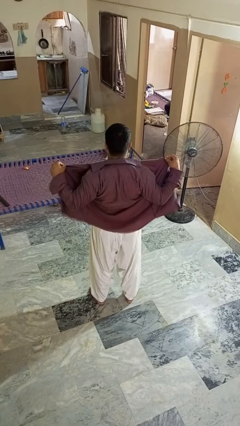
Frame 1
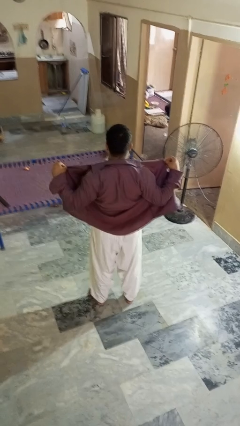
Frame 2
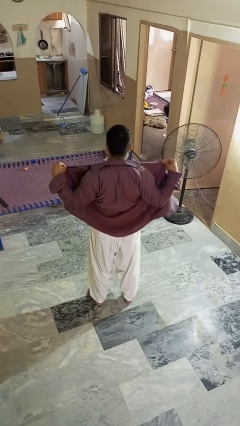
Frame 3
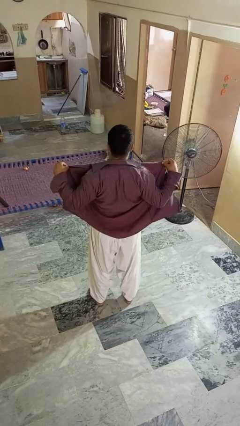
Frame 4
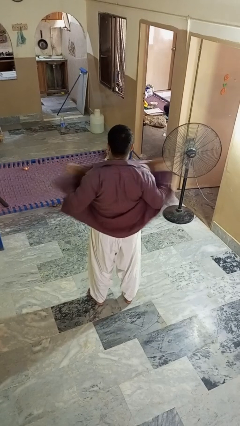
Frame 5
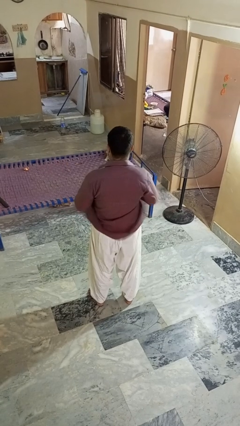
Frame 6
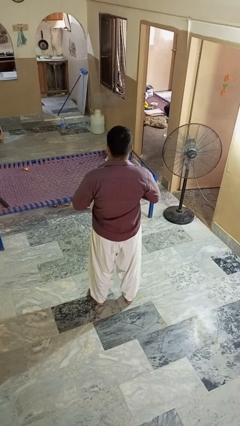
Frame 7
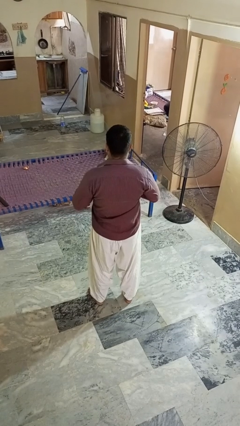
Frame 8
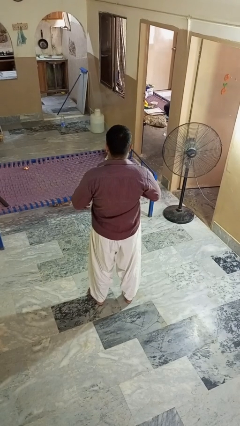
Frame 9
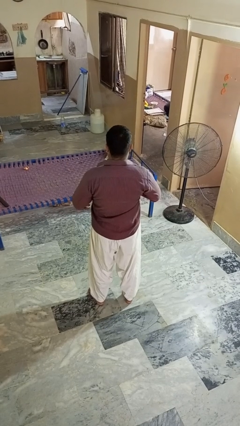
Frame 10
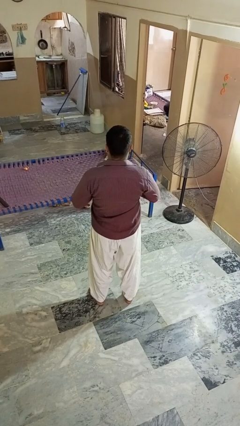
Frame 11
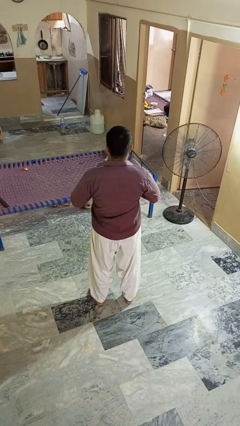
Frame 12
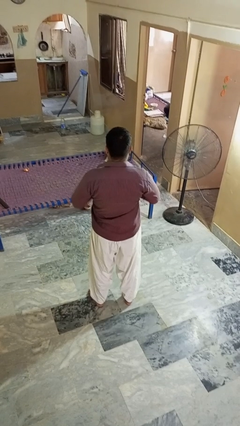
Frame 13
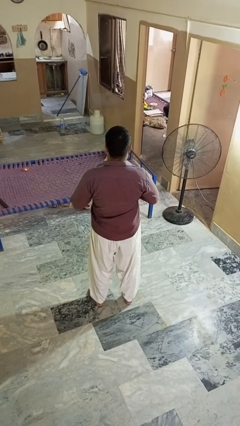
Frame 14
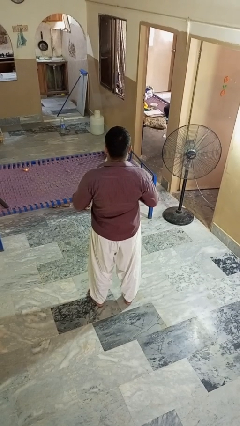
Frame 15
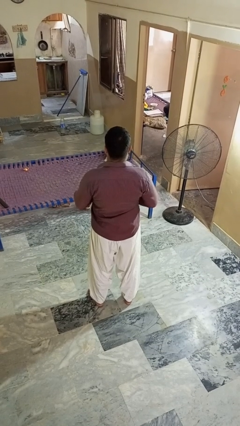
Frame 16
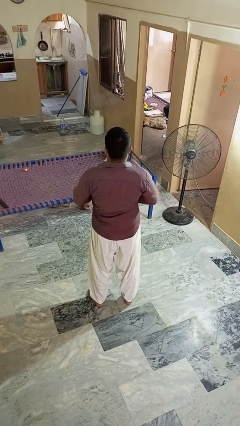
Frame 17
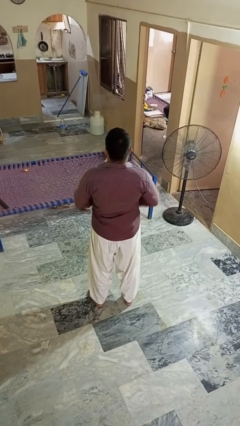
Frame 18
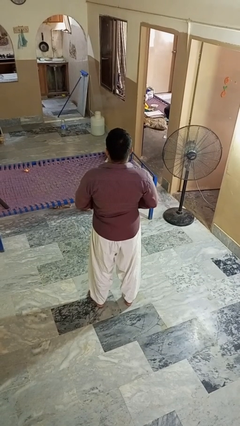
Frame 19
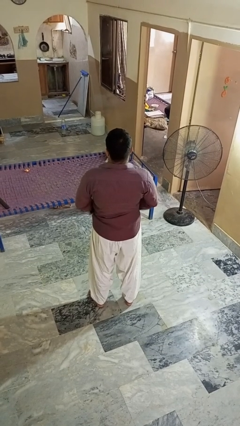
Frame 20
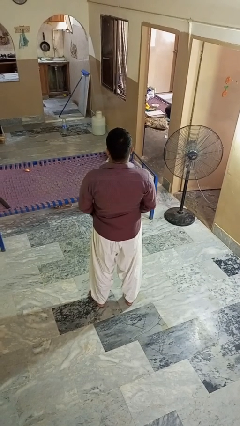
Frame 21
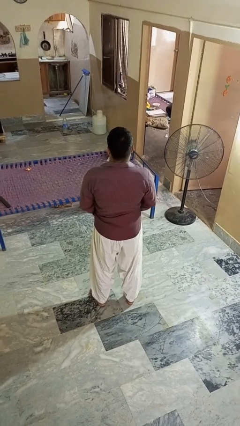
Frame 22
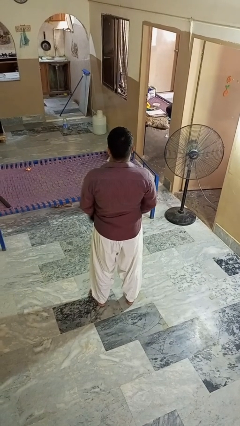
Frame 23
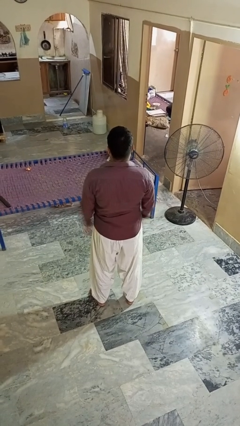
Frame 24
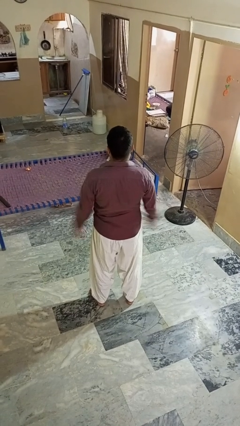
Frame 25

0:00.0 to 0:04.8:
person buttons shirt

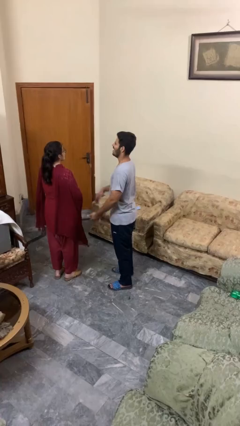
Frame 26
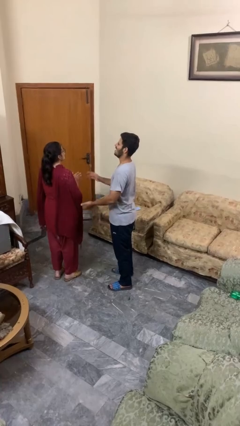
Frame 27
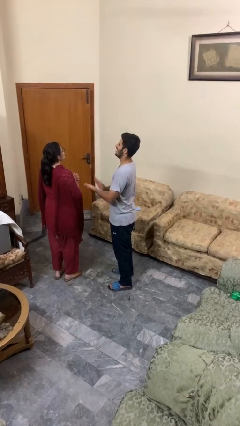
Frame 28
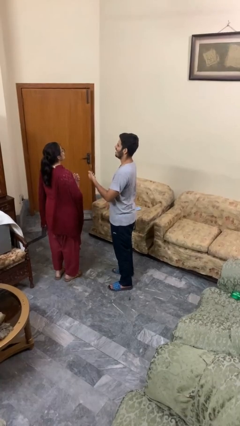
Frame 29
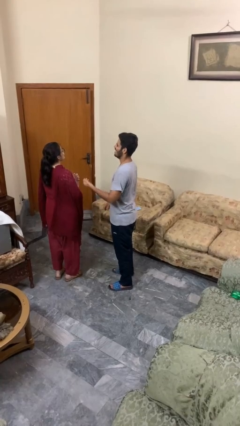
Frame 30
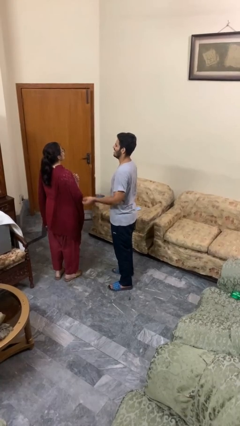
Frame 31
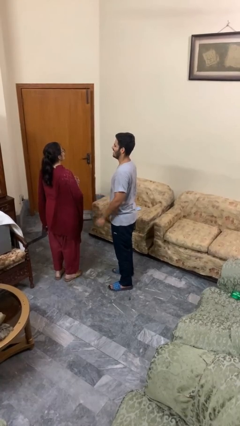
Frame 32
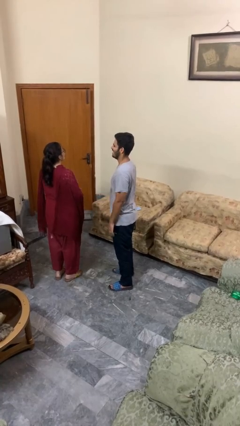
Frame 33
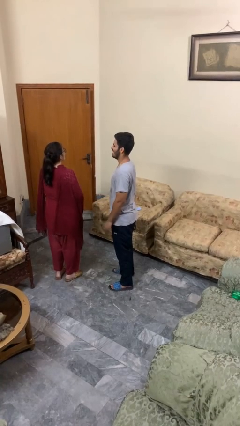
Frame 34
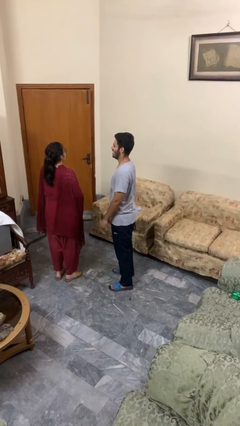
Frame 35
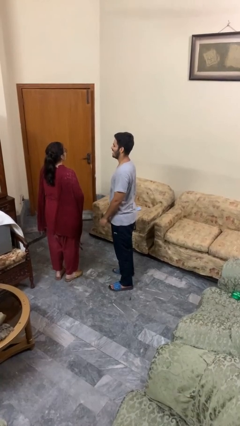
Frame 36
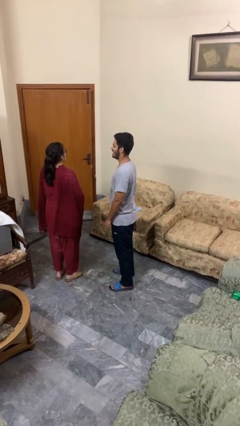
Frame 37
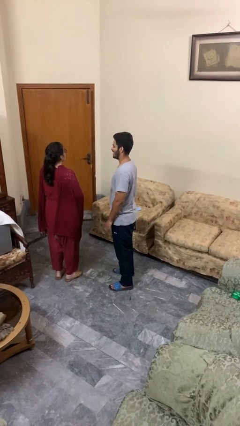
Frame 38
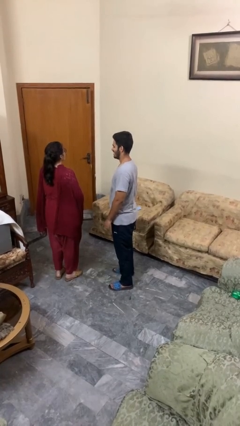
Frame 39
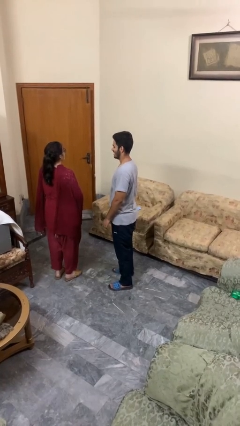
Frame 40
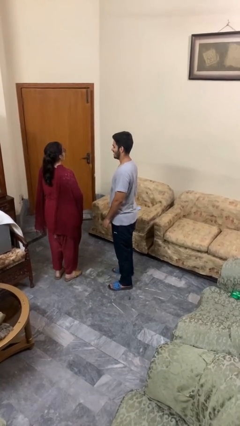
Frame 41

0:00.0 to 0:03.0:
person laughs with person

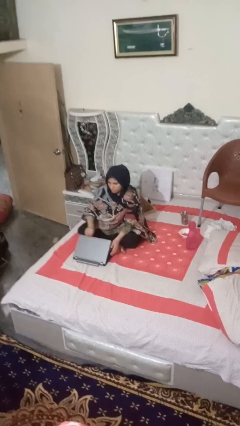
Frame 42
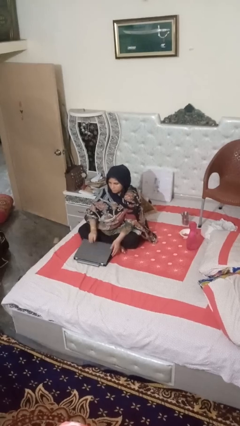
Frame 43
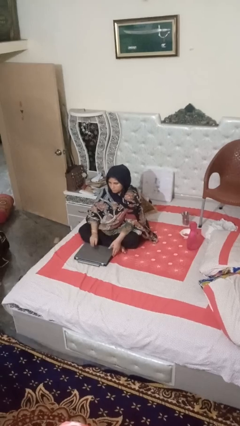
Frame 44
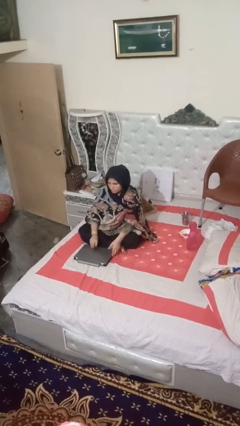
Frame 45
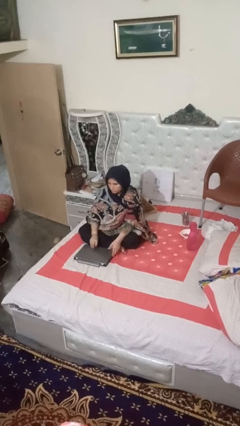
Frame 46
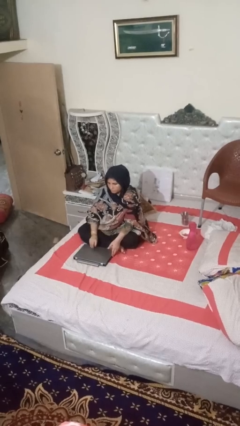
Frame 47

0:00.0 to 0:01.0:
person closes laptop

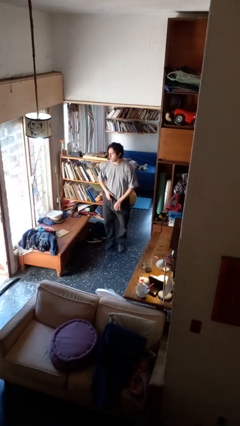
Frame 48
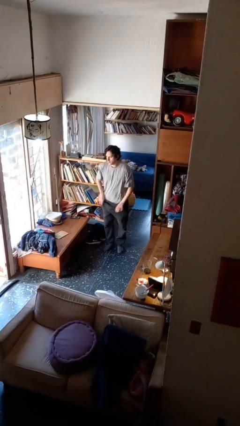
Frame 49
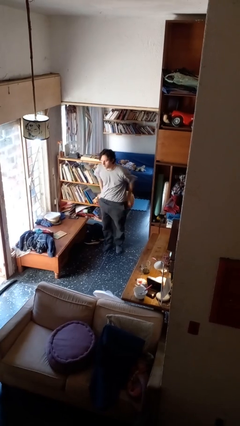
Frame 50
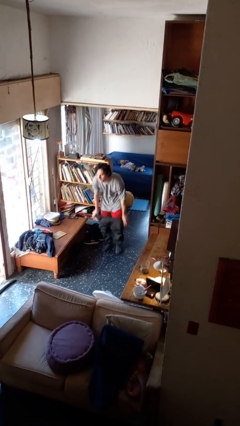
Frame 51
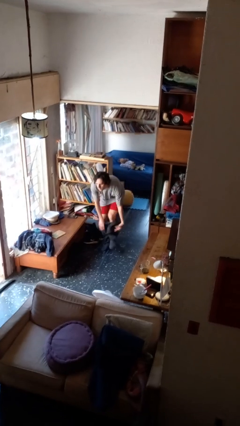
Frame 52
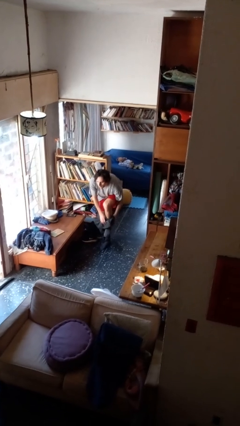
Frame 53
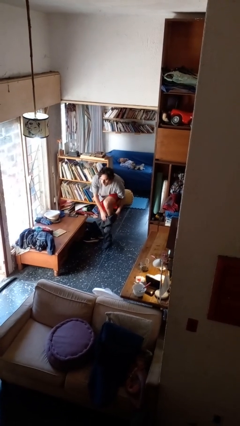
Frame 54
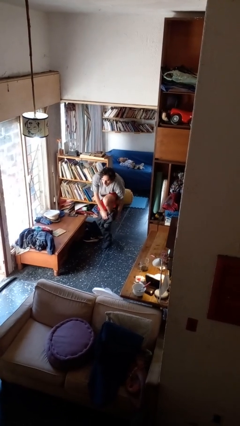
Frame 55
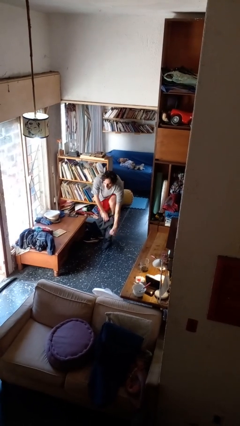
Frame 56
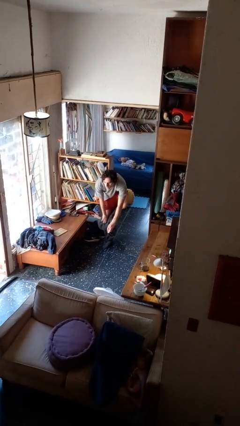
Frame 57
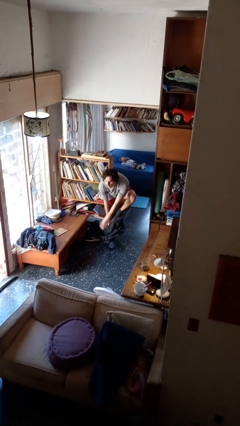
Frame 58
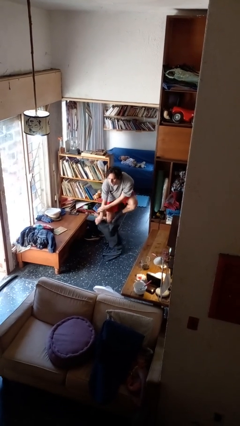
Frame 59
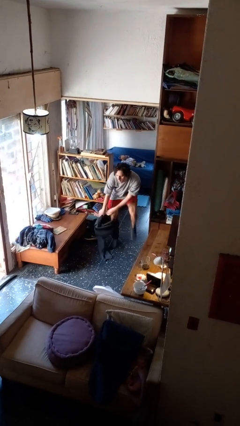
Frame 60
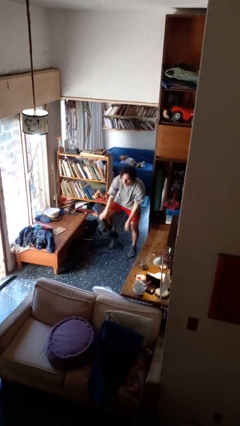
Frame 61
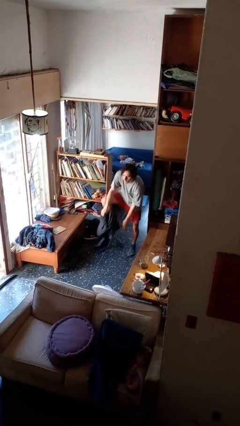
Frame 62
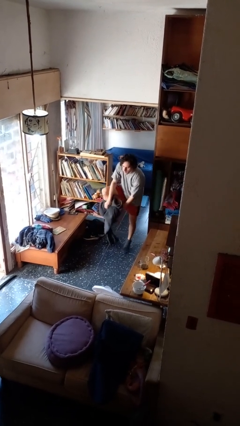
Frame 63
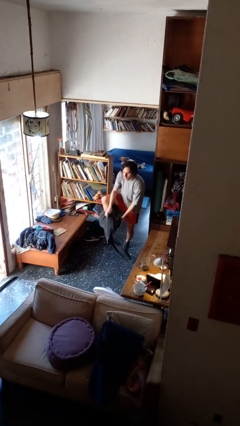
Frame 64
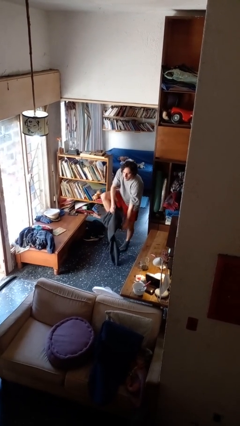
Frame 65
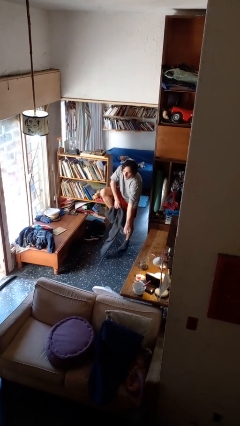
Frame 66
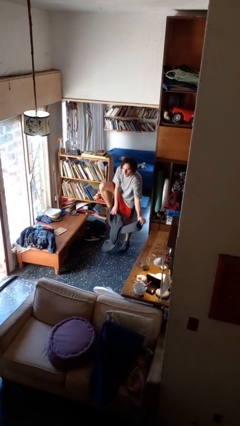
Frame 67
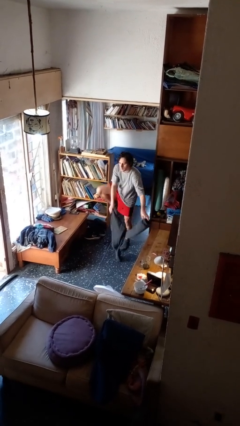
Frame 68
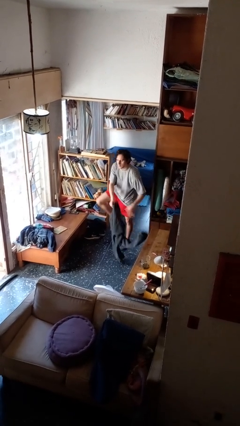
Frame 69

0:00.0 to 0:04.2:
person takes off pants

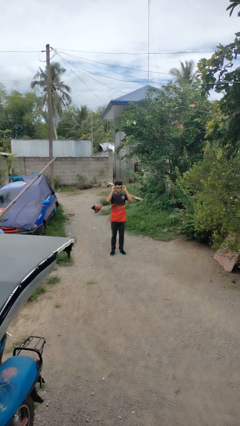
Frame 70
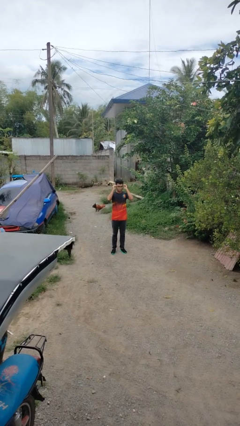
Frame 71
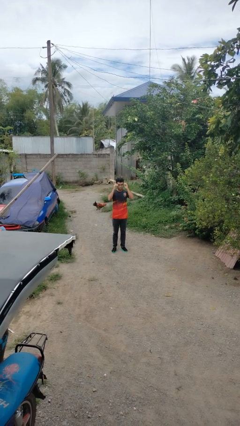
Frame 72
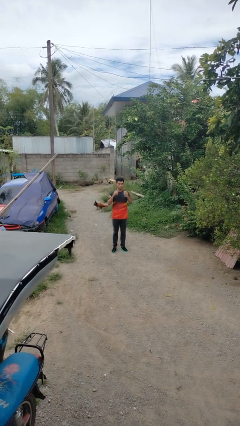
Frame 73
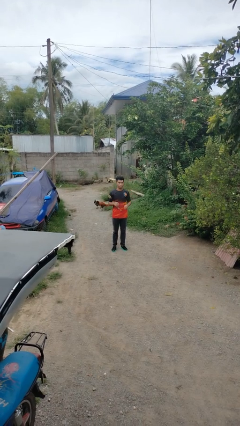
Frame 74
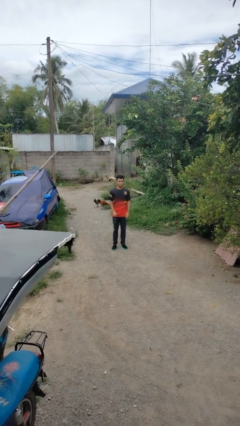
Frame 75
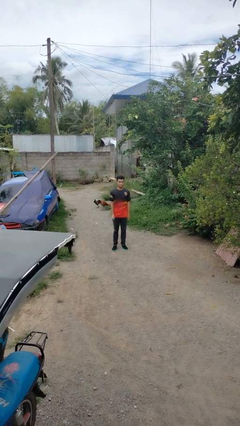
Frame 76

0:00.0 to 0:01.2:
person takes off glasses

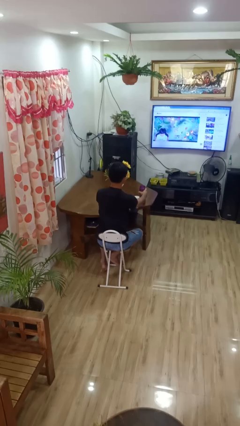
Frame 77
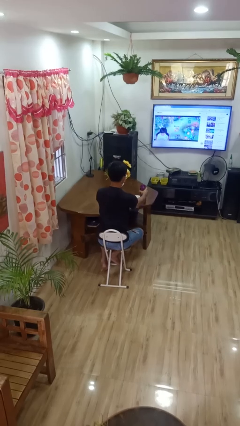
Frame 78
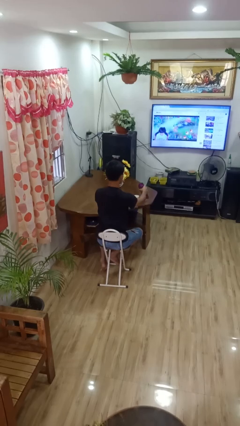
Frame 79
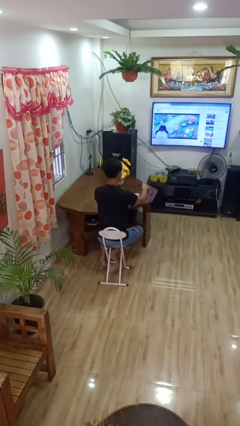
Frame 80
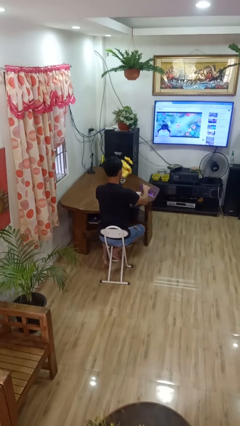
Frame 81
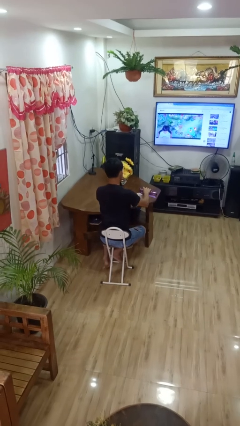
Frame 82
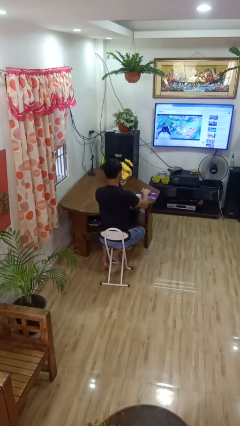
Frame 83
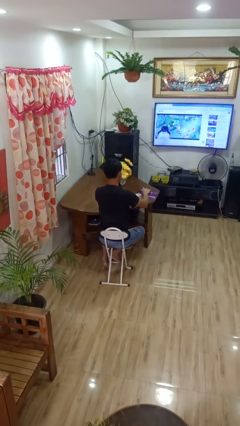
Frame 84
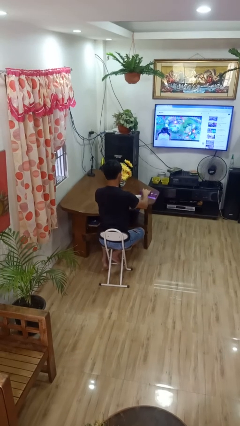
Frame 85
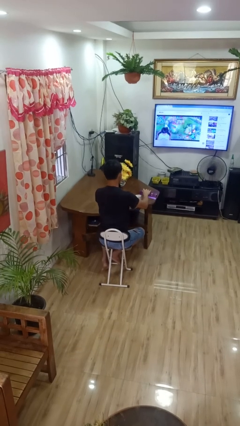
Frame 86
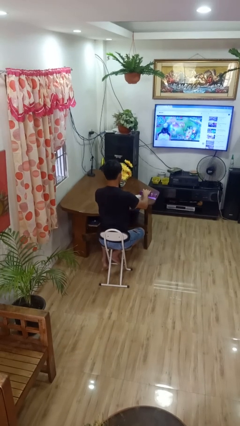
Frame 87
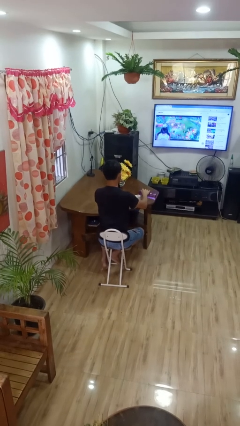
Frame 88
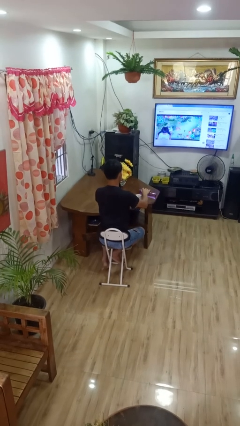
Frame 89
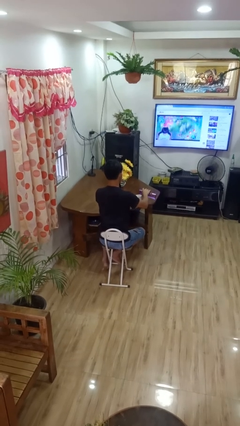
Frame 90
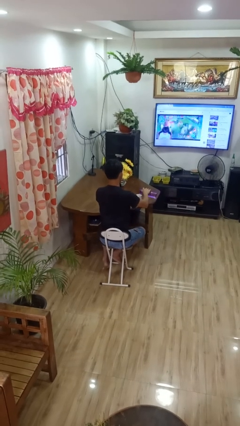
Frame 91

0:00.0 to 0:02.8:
person pours liquid into cup

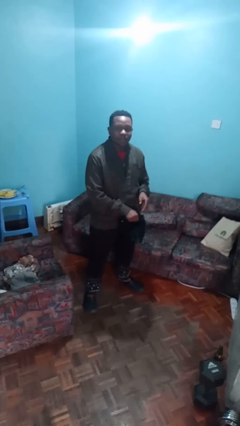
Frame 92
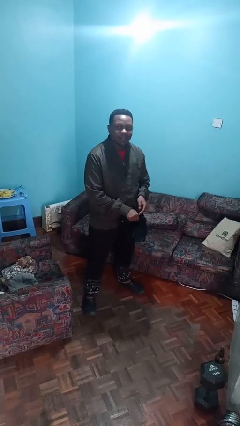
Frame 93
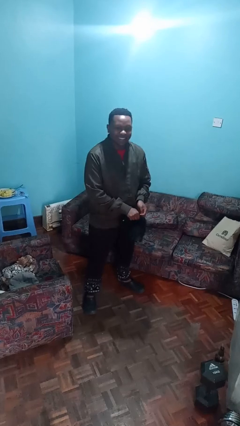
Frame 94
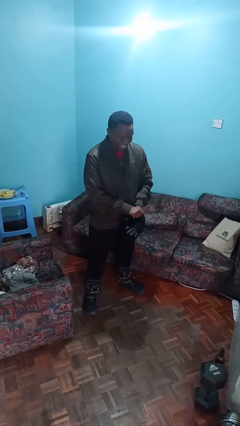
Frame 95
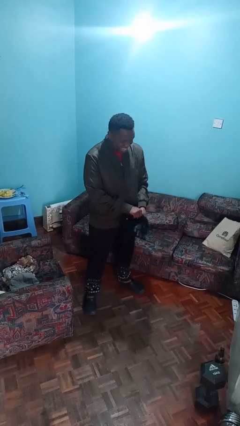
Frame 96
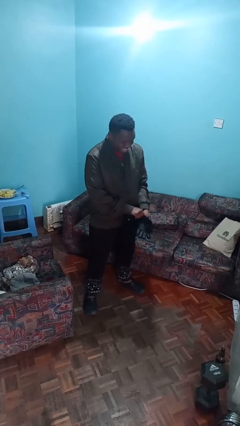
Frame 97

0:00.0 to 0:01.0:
person takes off gloves
